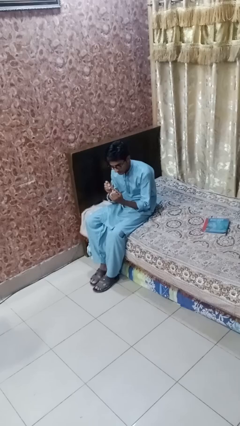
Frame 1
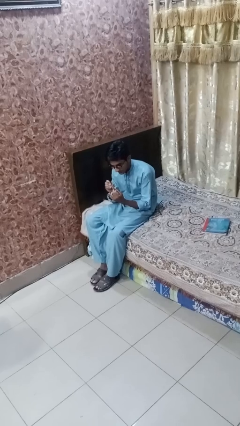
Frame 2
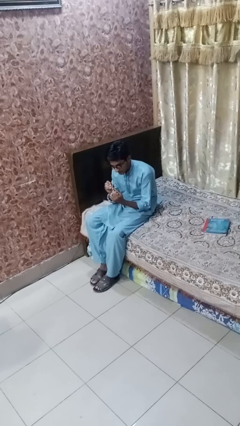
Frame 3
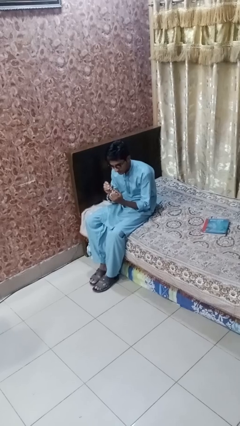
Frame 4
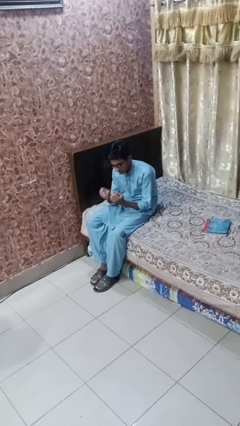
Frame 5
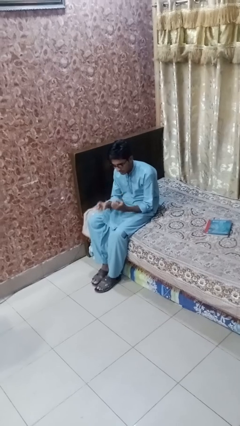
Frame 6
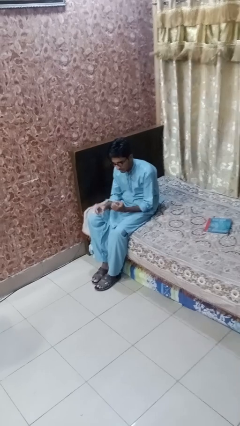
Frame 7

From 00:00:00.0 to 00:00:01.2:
person clips fingernails

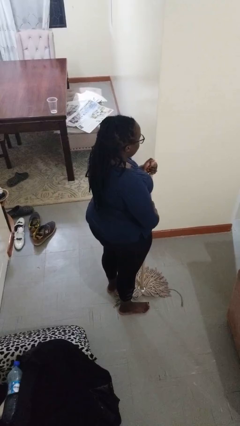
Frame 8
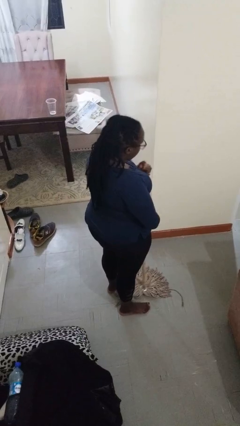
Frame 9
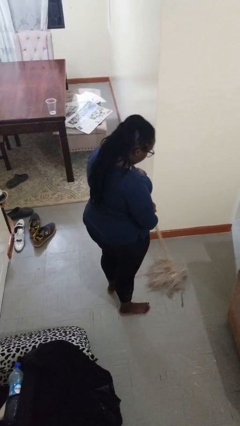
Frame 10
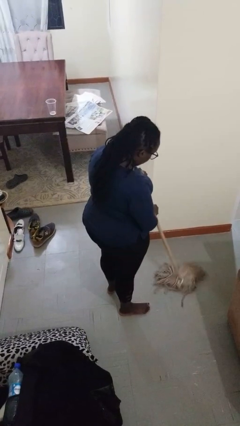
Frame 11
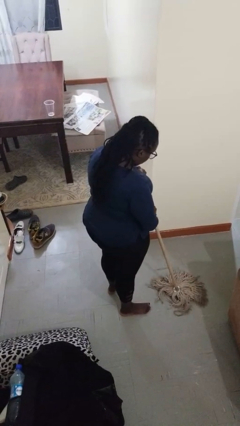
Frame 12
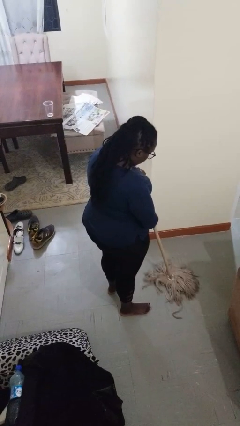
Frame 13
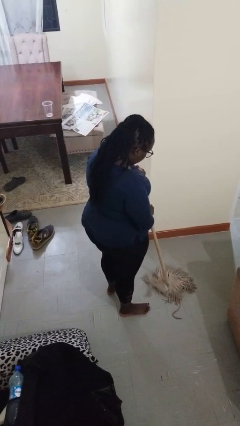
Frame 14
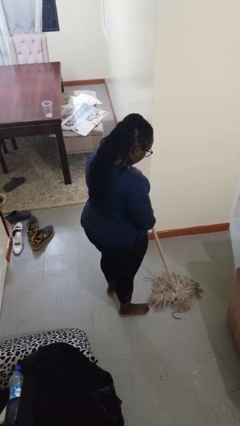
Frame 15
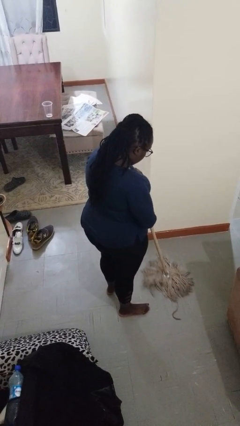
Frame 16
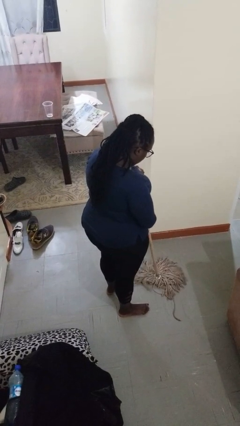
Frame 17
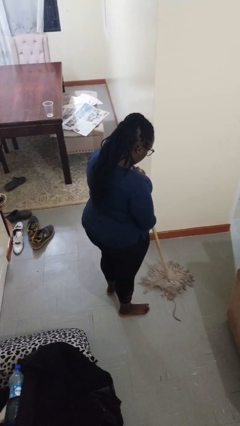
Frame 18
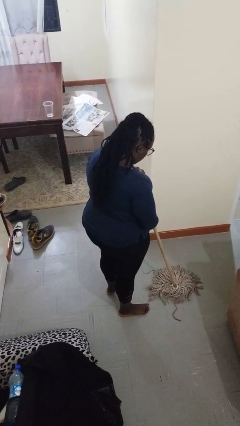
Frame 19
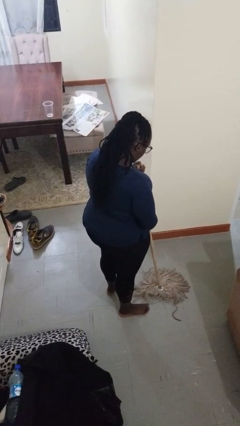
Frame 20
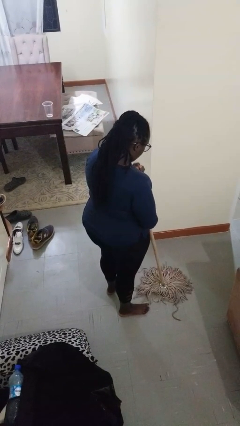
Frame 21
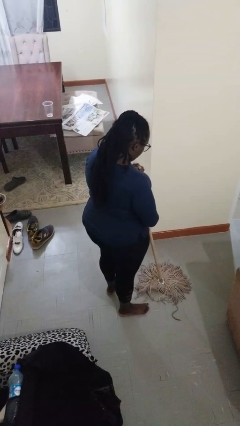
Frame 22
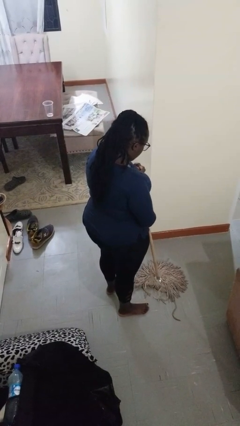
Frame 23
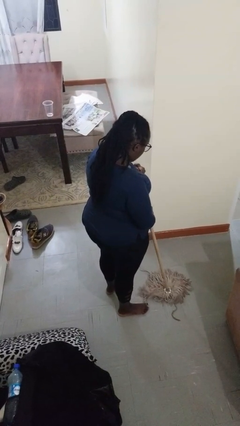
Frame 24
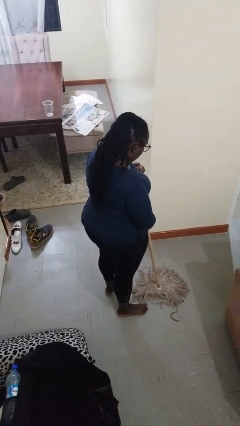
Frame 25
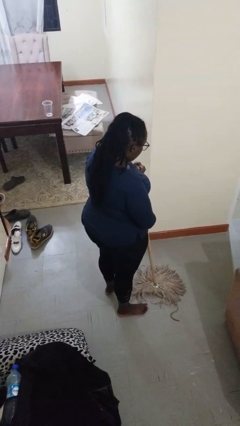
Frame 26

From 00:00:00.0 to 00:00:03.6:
person mops

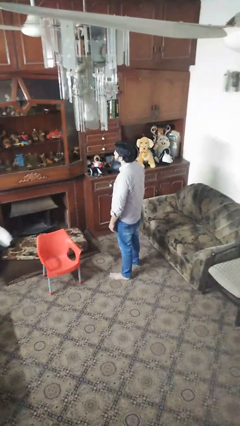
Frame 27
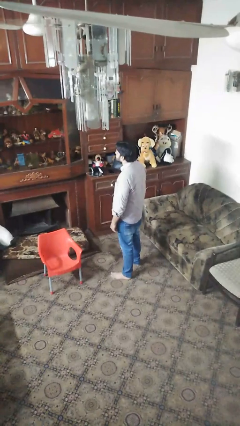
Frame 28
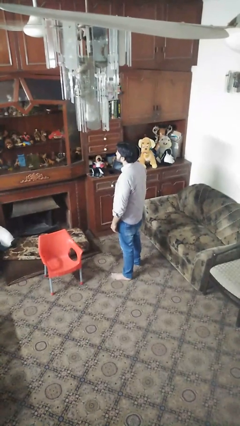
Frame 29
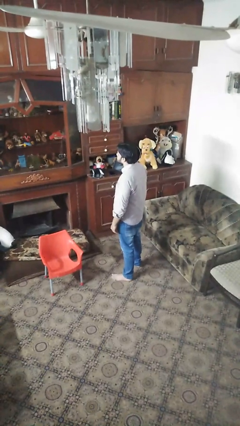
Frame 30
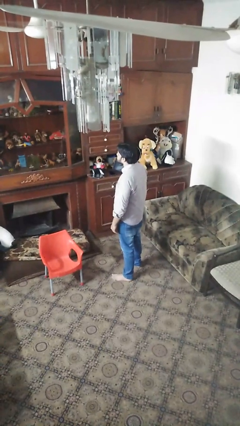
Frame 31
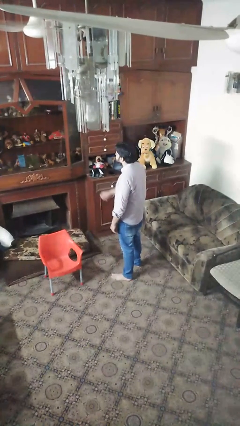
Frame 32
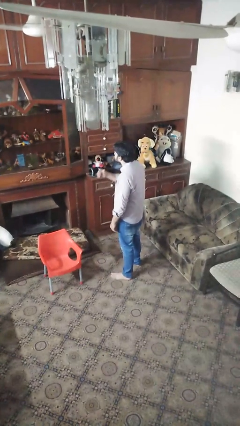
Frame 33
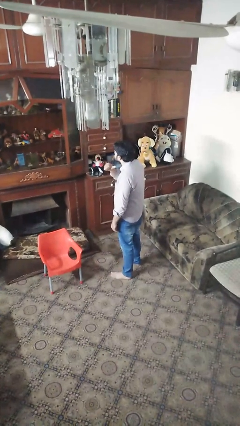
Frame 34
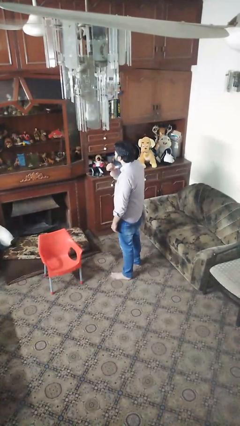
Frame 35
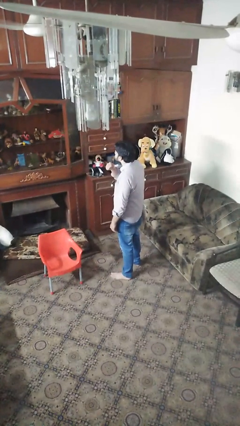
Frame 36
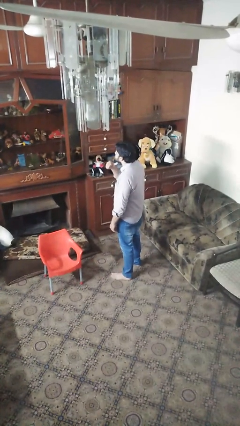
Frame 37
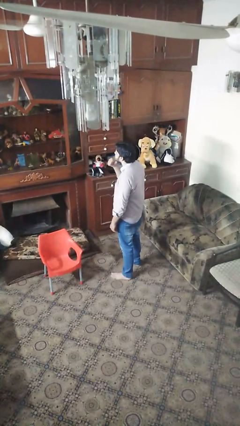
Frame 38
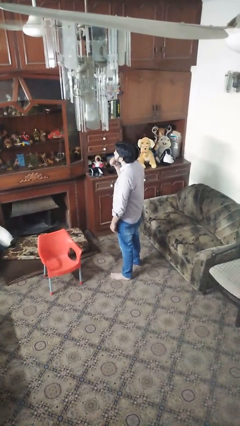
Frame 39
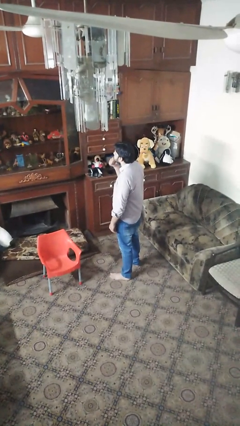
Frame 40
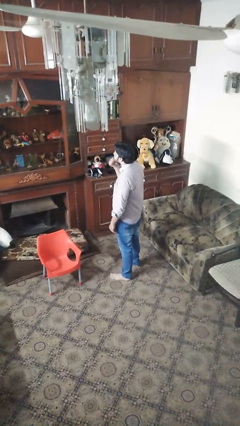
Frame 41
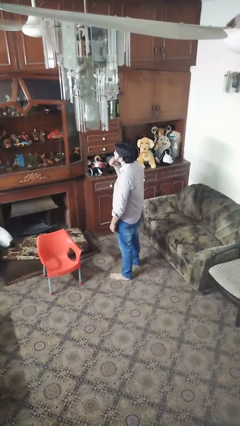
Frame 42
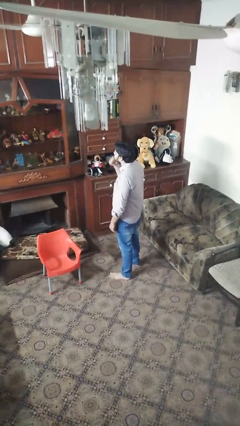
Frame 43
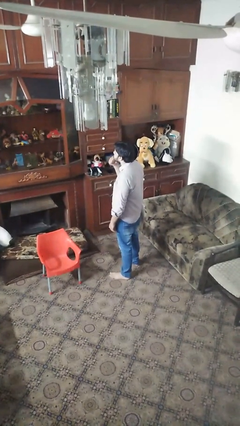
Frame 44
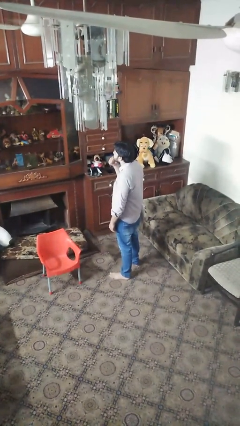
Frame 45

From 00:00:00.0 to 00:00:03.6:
person gestures cut

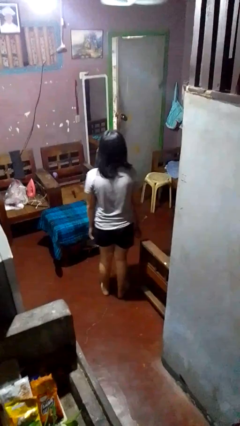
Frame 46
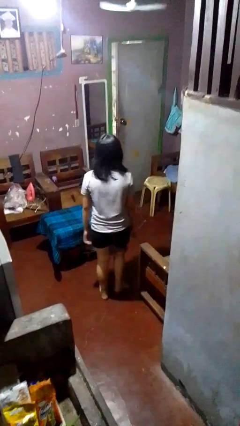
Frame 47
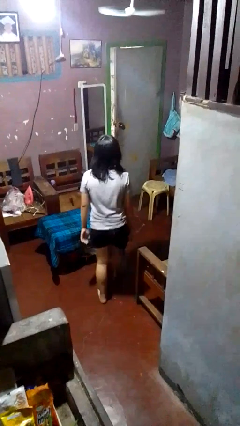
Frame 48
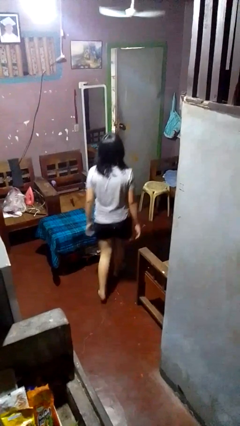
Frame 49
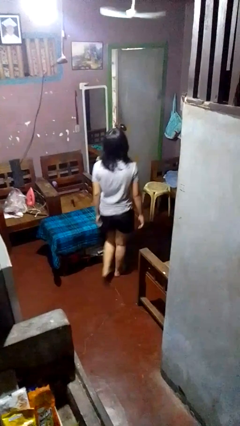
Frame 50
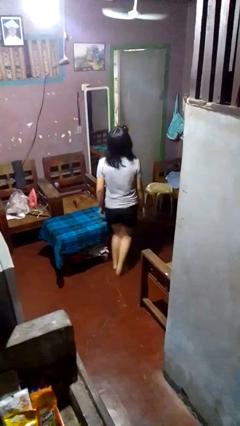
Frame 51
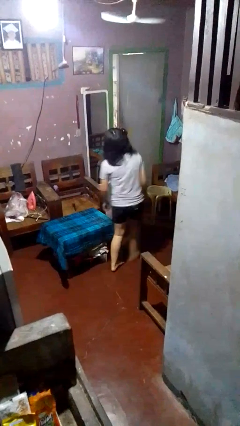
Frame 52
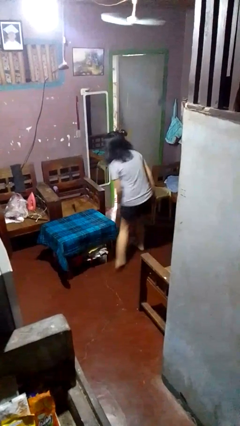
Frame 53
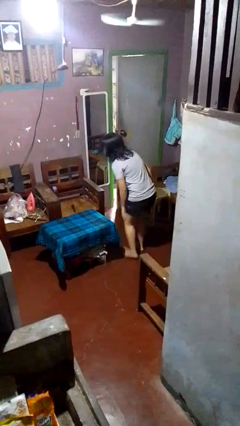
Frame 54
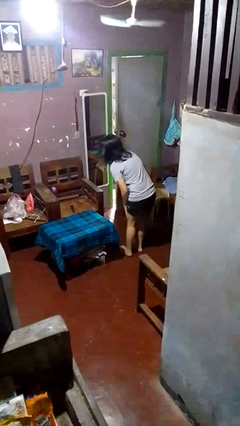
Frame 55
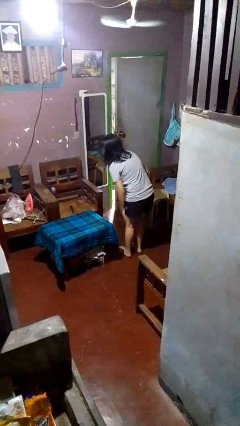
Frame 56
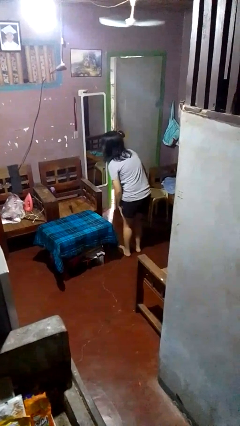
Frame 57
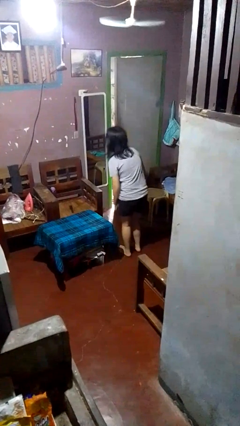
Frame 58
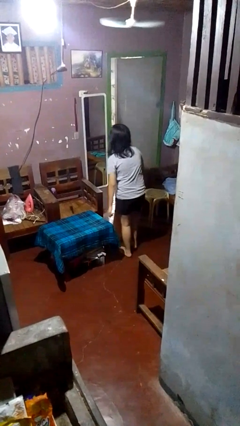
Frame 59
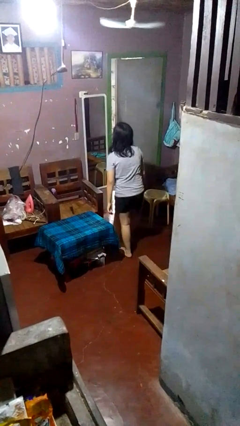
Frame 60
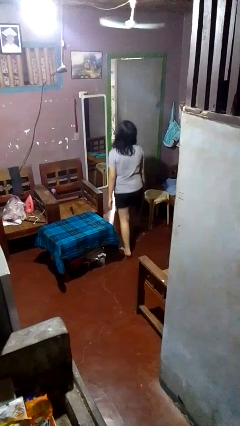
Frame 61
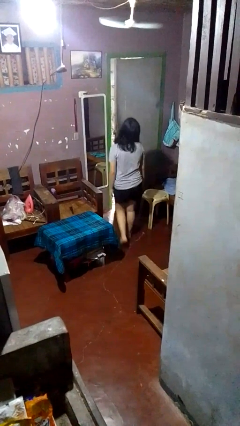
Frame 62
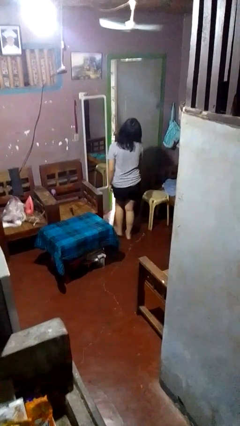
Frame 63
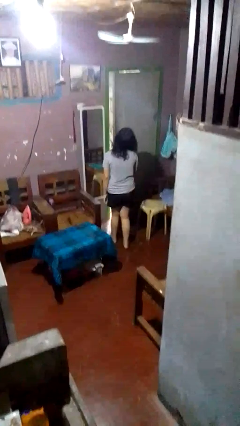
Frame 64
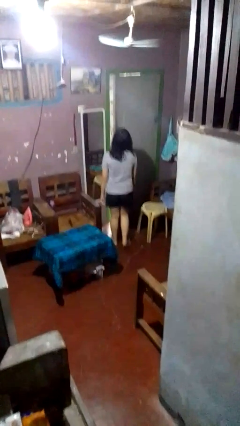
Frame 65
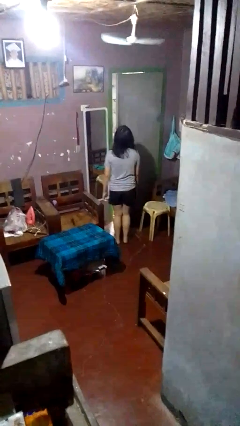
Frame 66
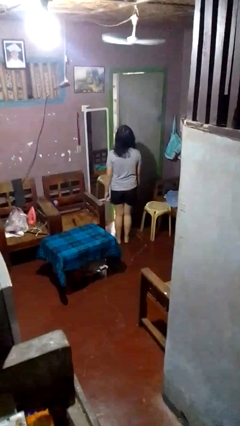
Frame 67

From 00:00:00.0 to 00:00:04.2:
person bumps into table

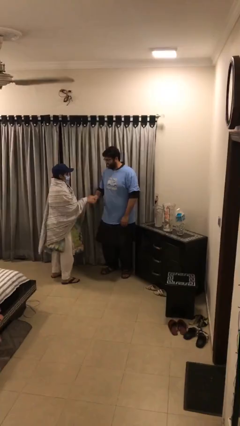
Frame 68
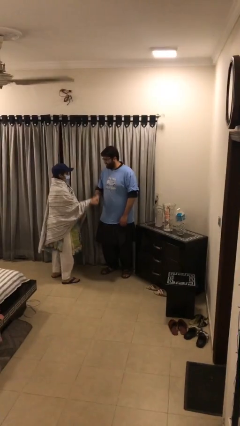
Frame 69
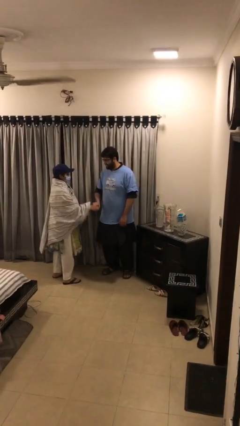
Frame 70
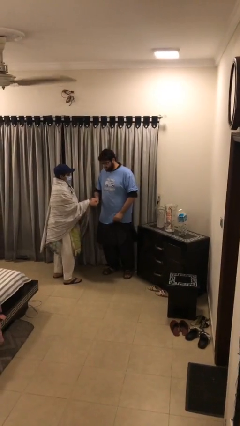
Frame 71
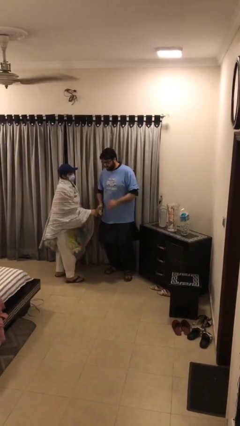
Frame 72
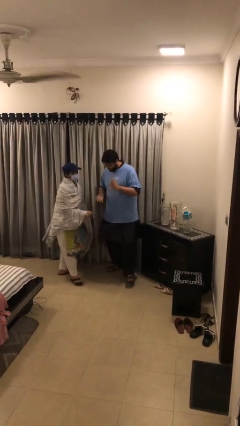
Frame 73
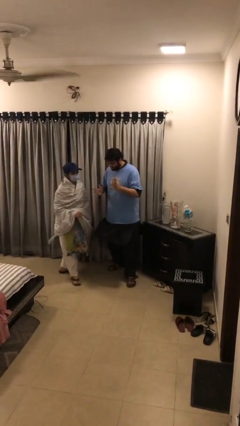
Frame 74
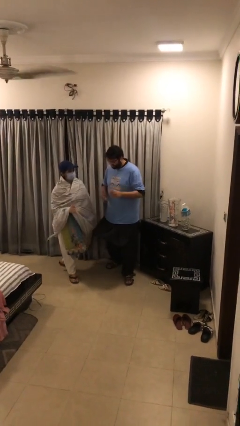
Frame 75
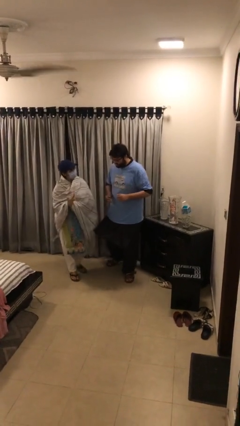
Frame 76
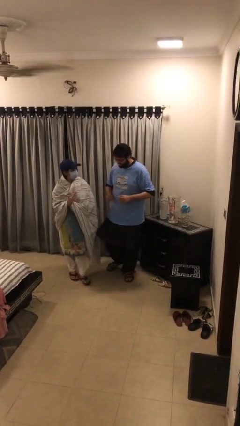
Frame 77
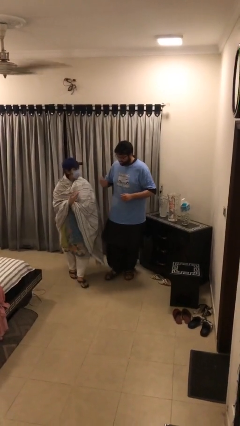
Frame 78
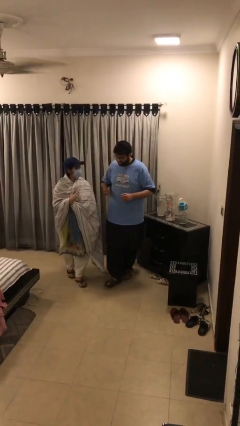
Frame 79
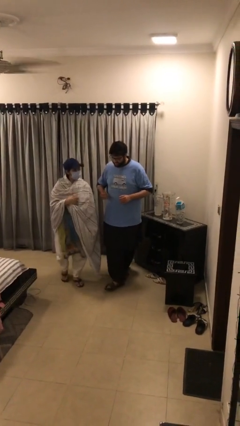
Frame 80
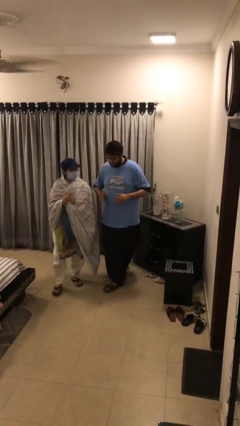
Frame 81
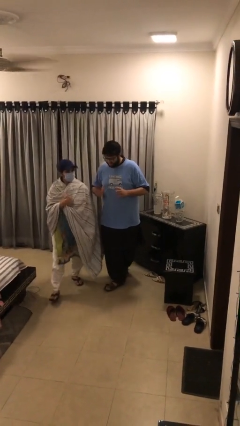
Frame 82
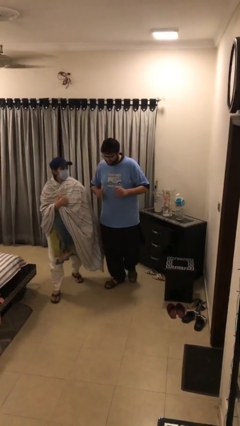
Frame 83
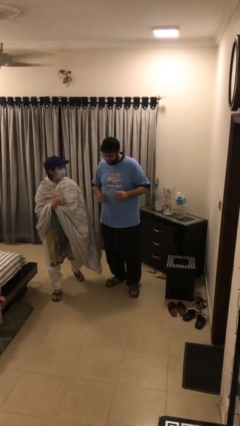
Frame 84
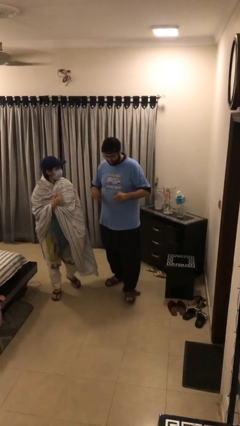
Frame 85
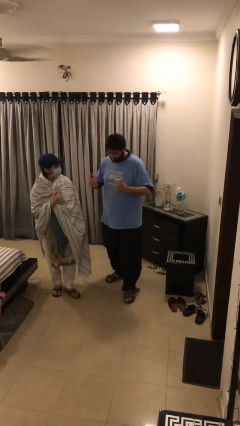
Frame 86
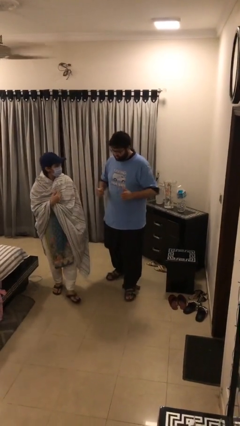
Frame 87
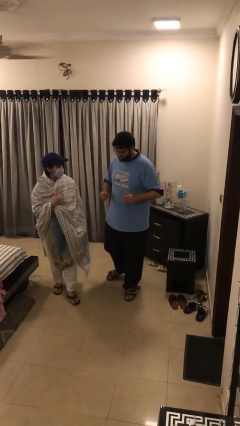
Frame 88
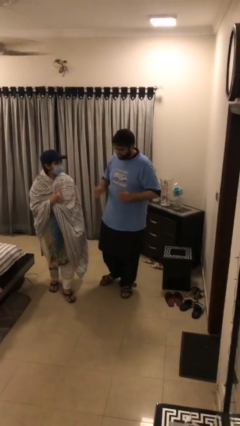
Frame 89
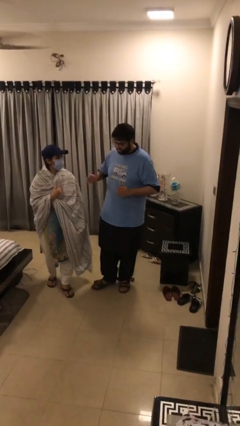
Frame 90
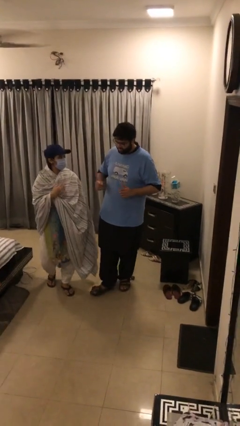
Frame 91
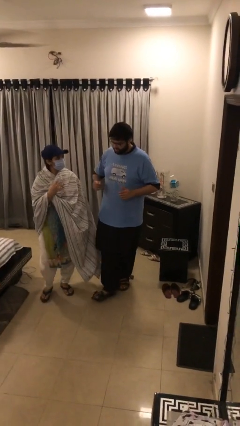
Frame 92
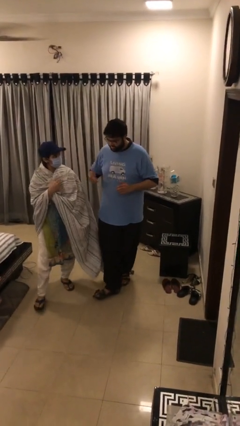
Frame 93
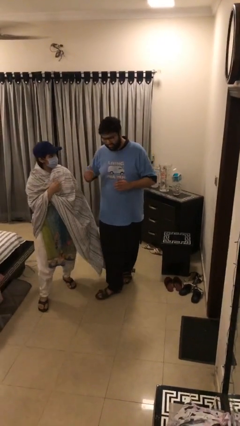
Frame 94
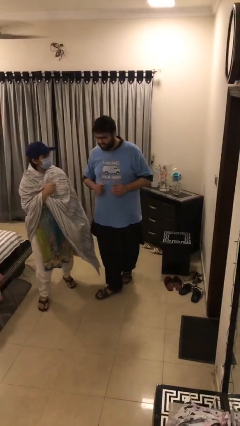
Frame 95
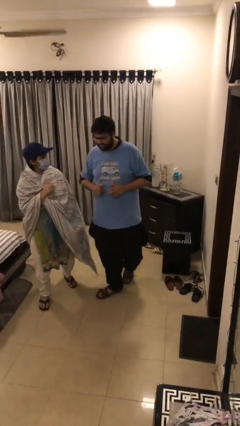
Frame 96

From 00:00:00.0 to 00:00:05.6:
person talks to person
